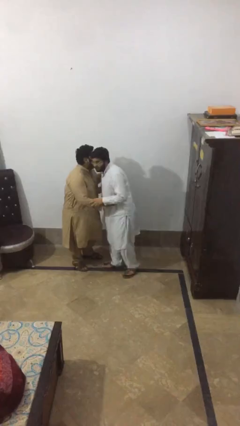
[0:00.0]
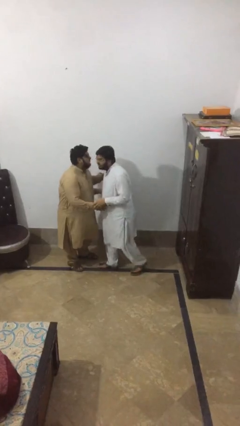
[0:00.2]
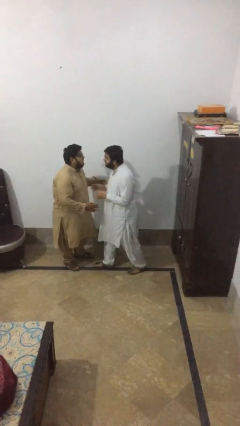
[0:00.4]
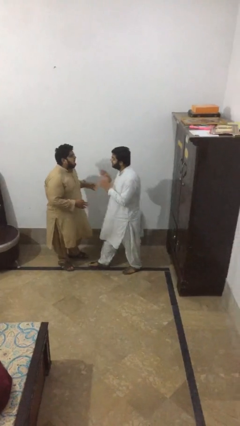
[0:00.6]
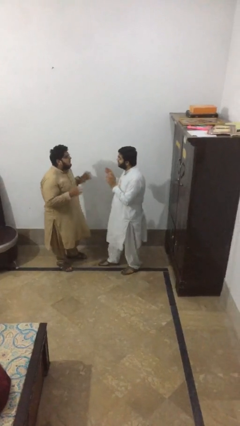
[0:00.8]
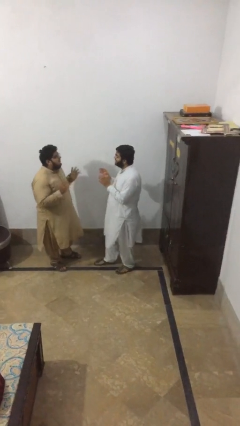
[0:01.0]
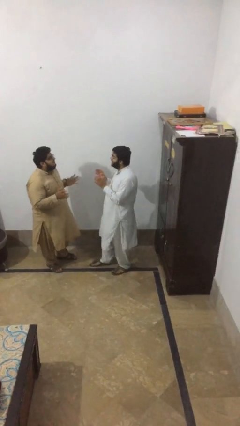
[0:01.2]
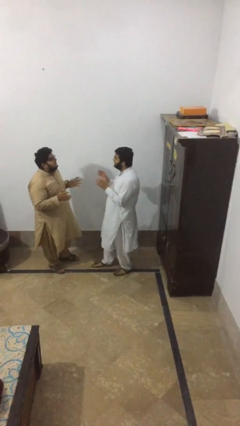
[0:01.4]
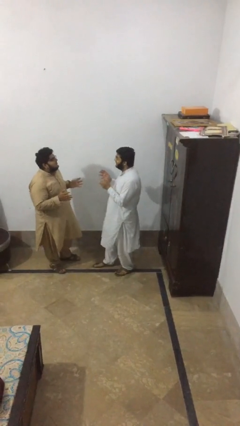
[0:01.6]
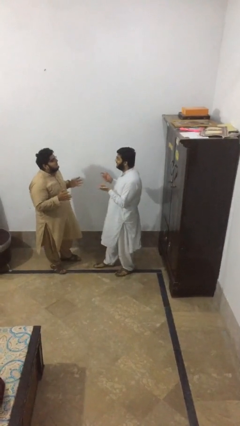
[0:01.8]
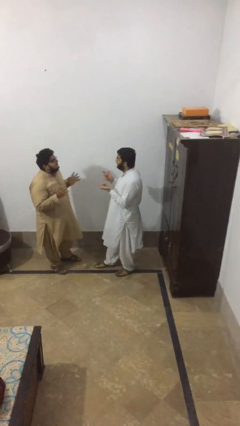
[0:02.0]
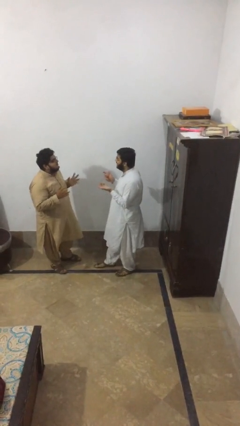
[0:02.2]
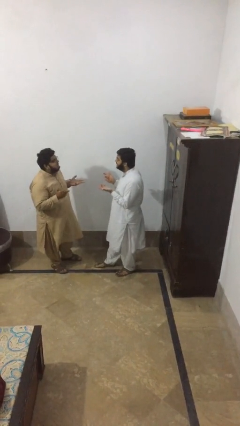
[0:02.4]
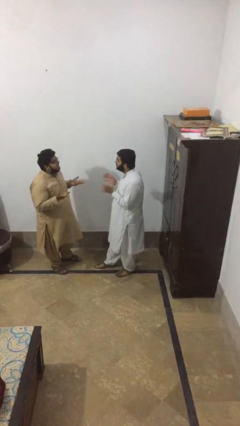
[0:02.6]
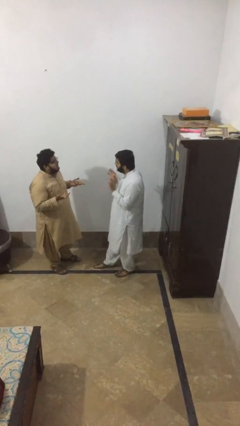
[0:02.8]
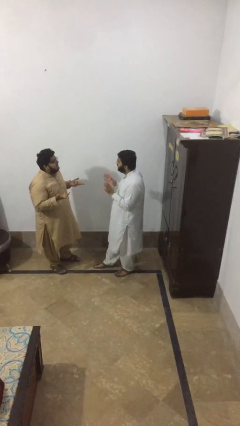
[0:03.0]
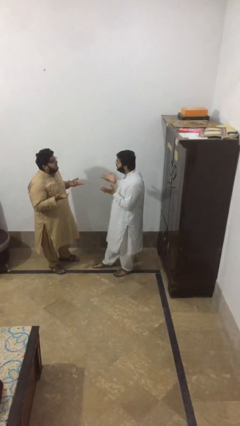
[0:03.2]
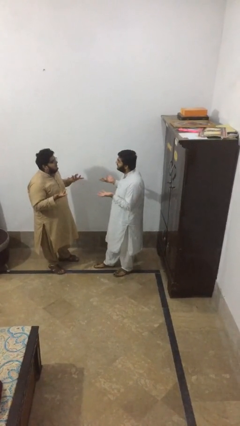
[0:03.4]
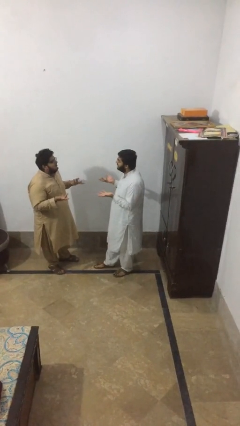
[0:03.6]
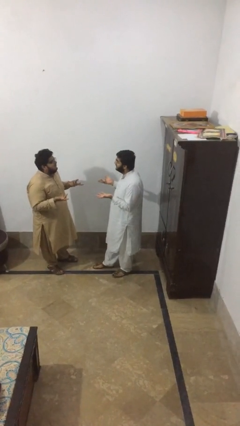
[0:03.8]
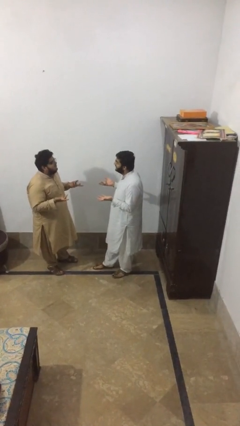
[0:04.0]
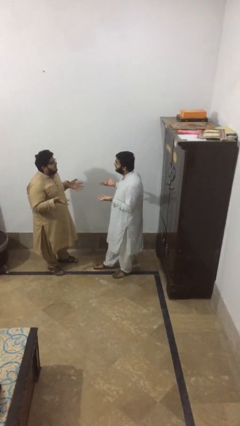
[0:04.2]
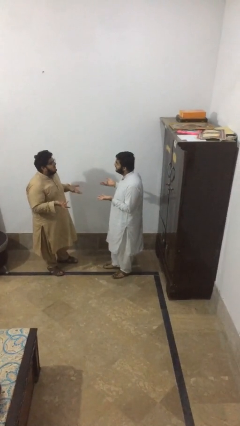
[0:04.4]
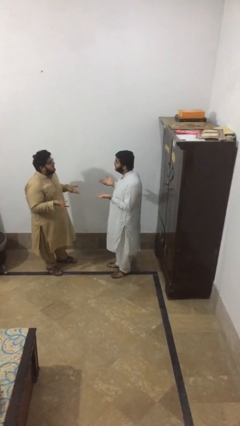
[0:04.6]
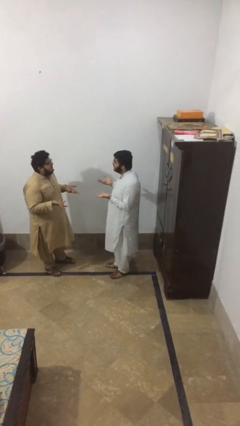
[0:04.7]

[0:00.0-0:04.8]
person talks to person

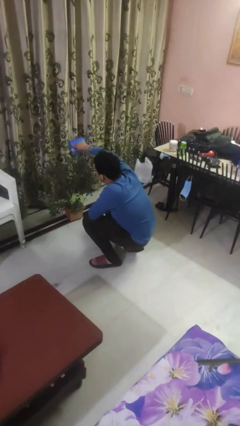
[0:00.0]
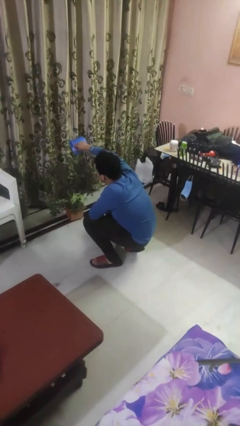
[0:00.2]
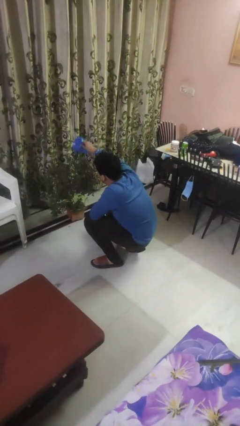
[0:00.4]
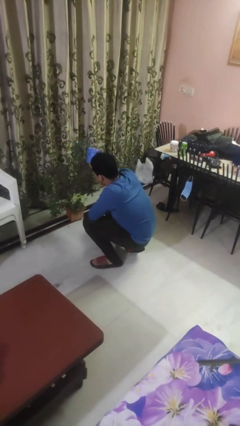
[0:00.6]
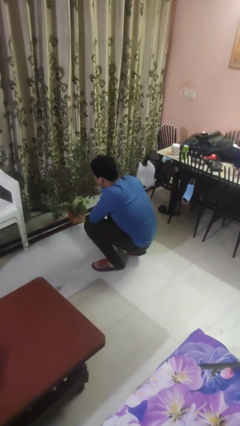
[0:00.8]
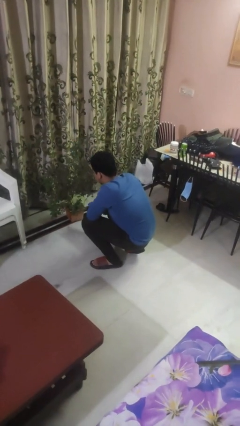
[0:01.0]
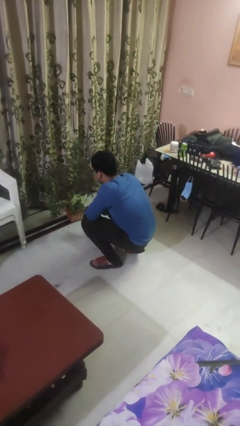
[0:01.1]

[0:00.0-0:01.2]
person waters houseplant

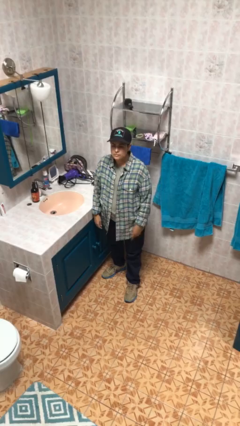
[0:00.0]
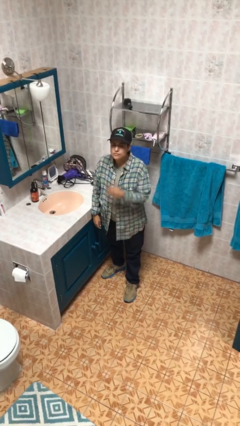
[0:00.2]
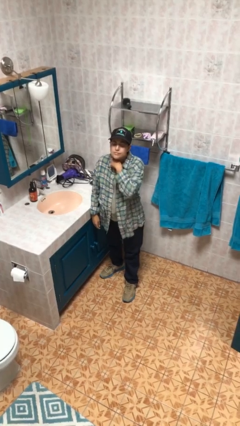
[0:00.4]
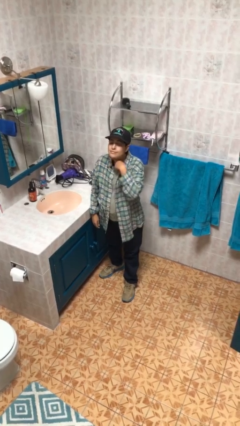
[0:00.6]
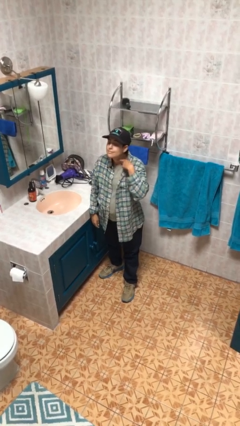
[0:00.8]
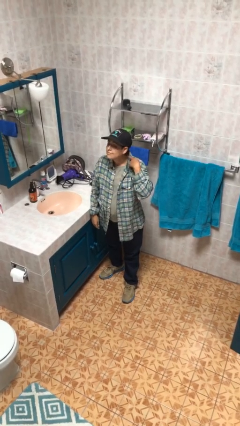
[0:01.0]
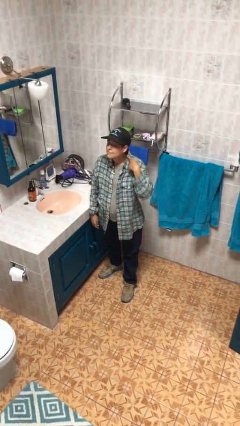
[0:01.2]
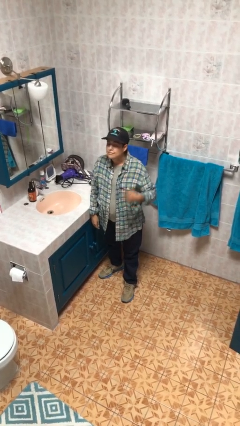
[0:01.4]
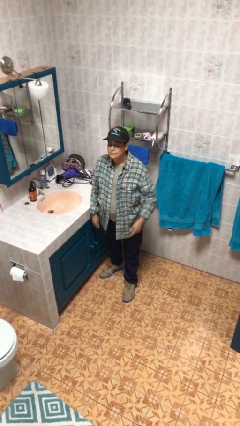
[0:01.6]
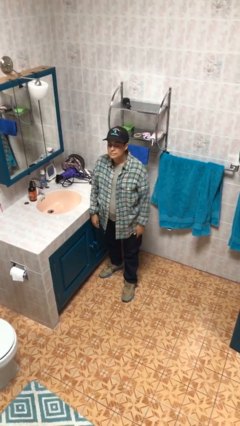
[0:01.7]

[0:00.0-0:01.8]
person gestures cut

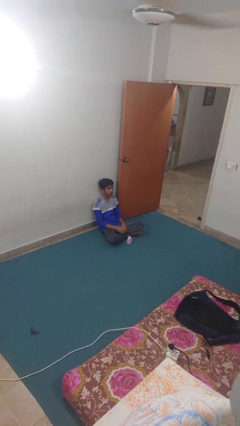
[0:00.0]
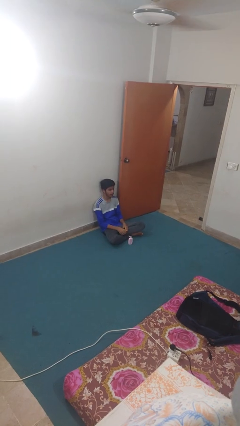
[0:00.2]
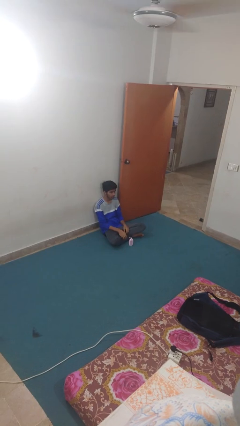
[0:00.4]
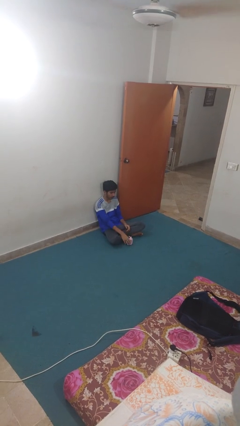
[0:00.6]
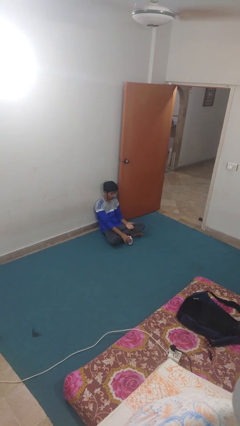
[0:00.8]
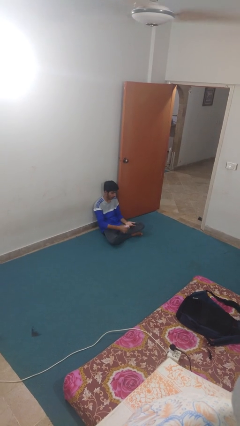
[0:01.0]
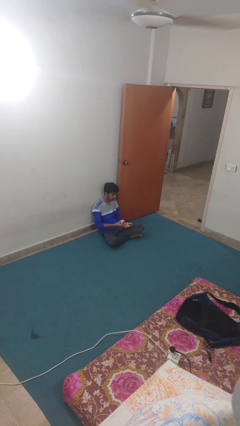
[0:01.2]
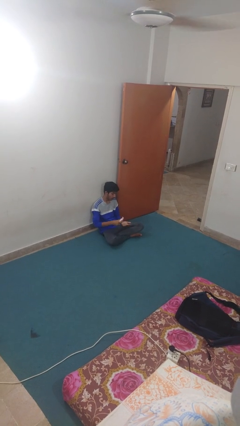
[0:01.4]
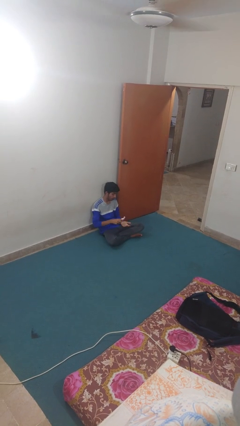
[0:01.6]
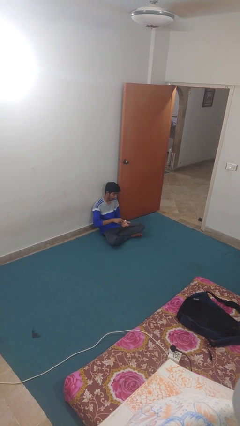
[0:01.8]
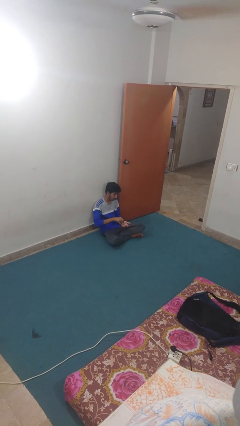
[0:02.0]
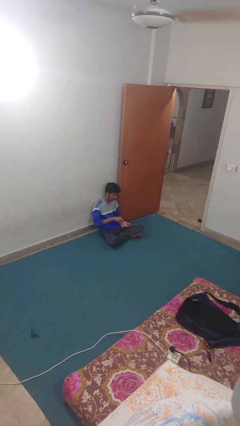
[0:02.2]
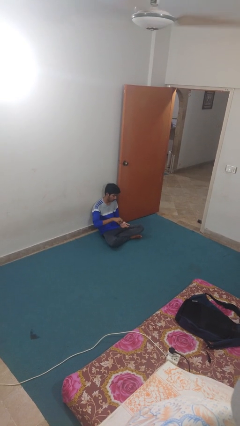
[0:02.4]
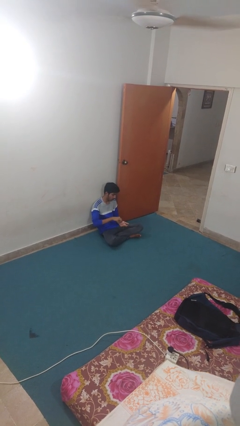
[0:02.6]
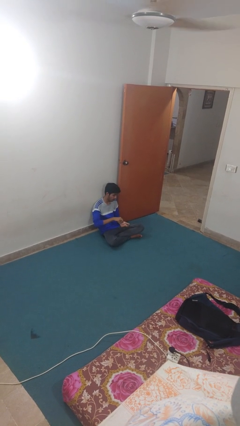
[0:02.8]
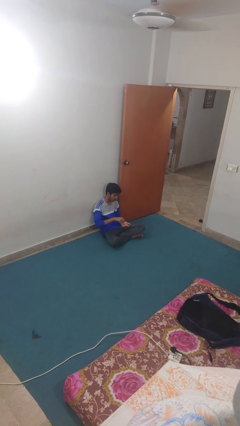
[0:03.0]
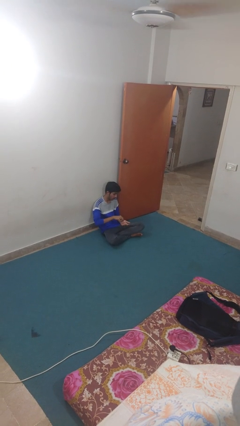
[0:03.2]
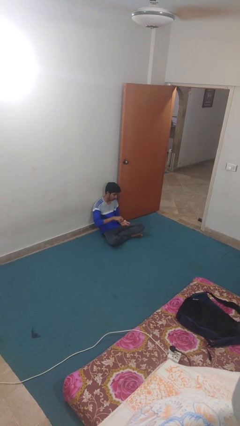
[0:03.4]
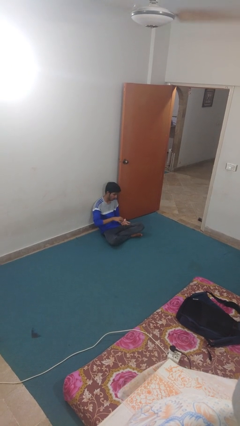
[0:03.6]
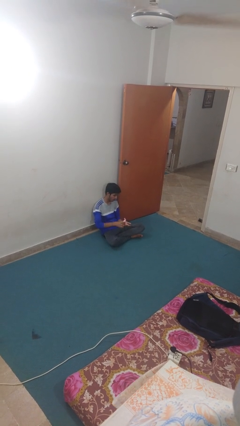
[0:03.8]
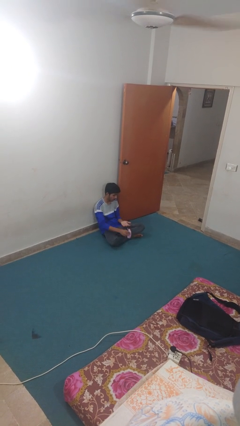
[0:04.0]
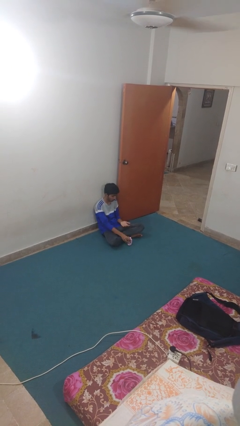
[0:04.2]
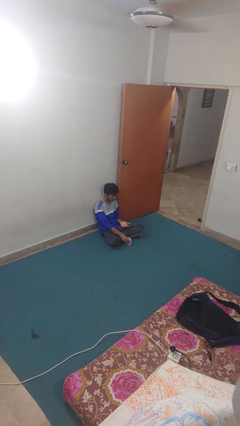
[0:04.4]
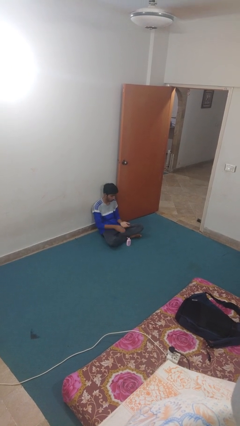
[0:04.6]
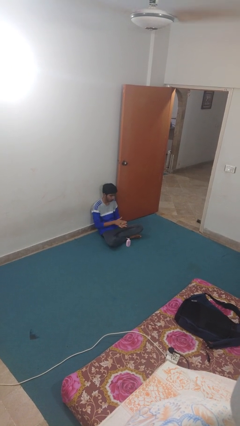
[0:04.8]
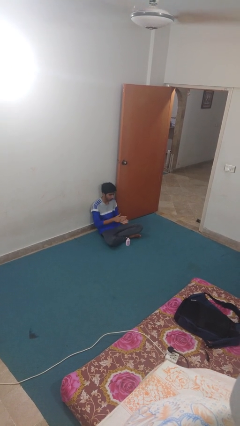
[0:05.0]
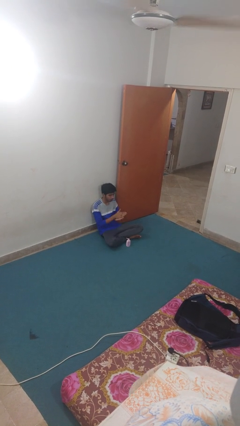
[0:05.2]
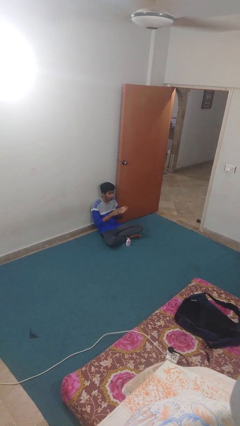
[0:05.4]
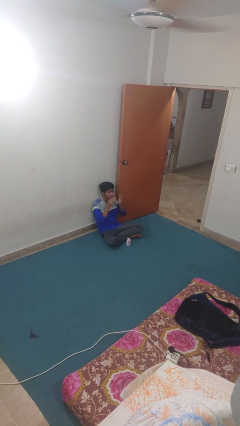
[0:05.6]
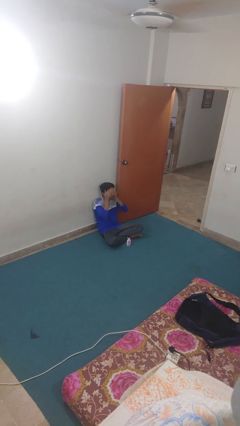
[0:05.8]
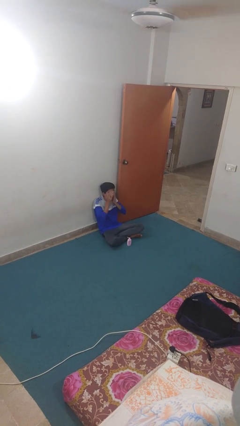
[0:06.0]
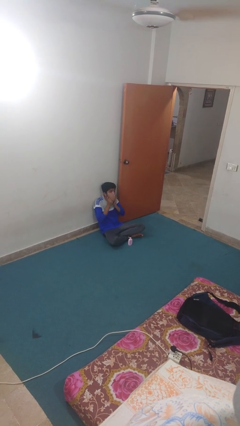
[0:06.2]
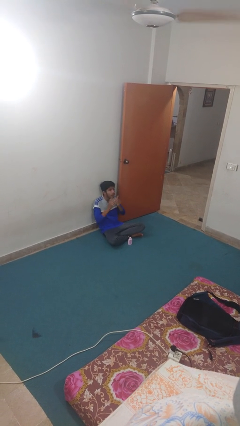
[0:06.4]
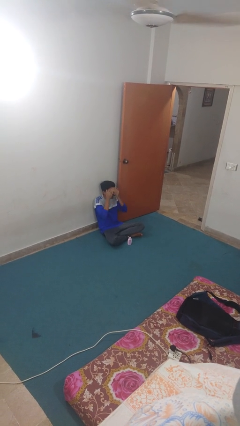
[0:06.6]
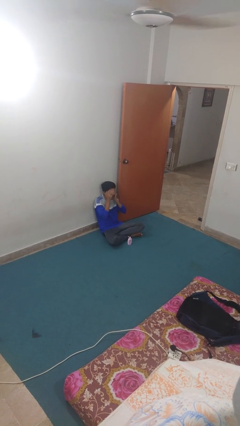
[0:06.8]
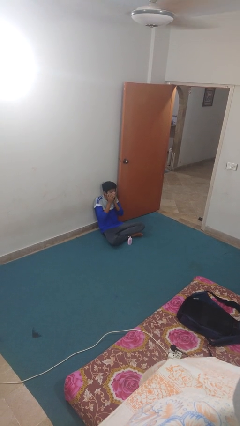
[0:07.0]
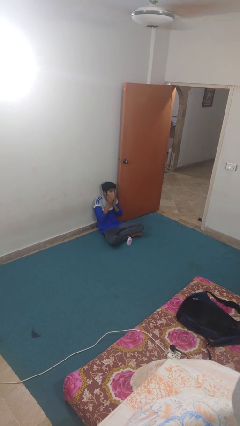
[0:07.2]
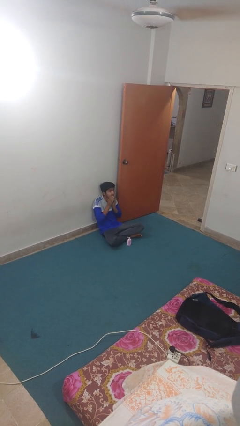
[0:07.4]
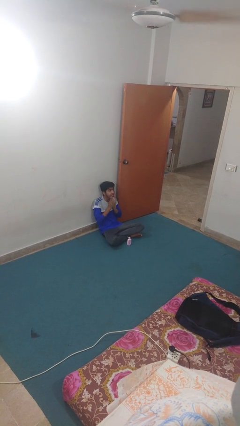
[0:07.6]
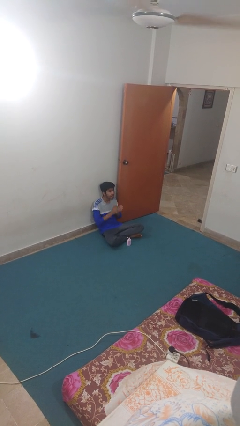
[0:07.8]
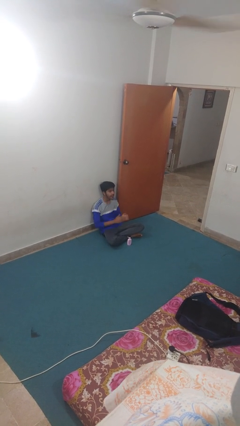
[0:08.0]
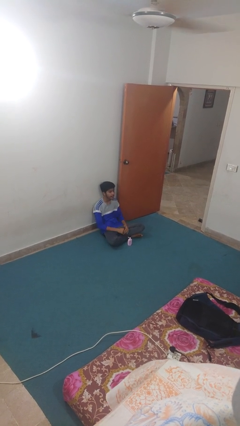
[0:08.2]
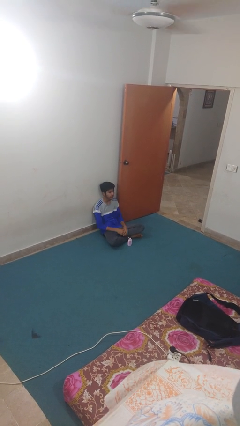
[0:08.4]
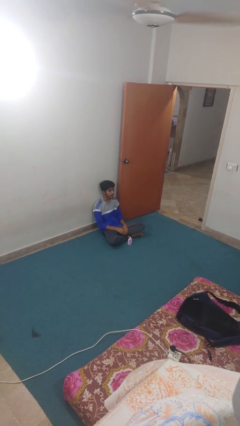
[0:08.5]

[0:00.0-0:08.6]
person applies facial moisturizer

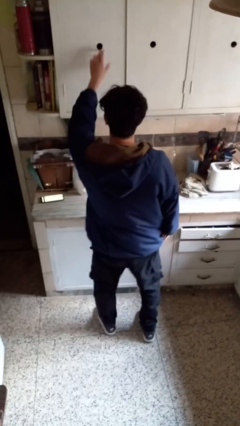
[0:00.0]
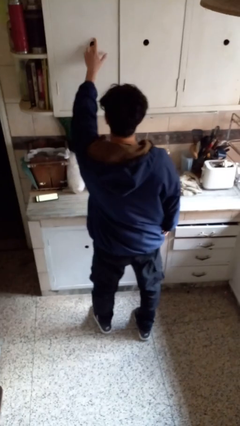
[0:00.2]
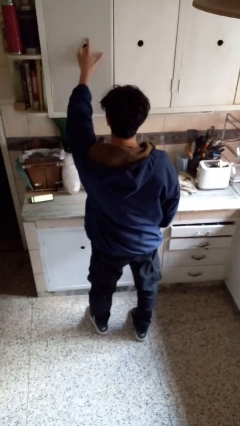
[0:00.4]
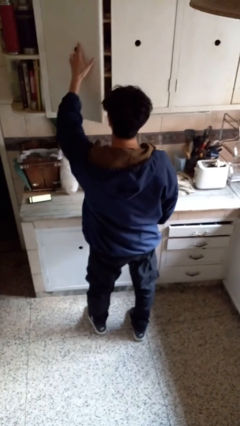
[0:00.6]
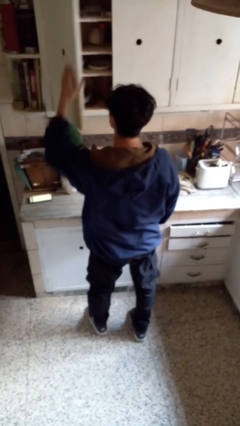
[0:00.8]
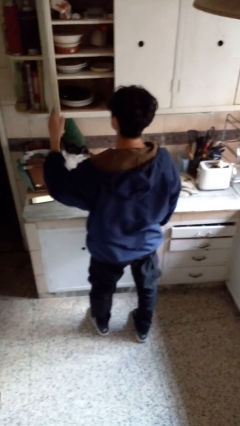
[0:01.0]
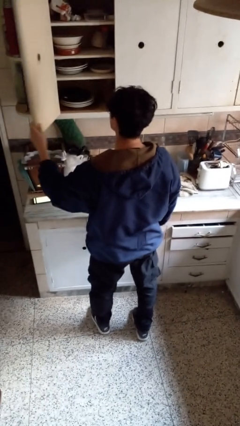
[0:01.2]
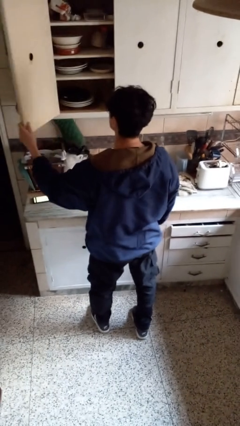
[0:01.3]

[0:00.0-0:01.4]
person opens cabinet
